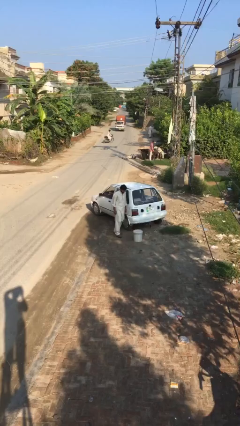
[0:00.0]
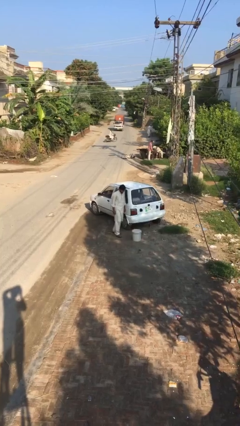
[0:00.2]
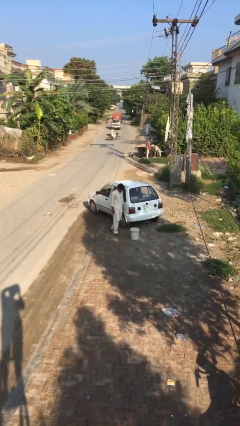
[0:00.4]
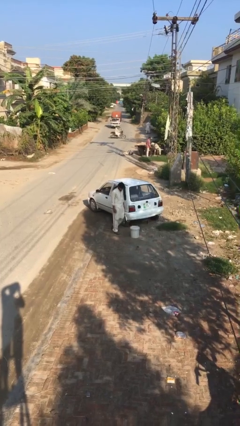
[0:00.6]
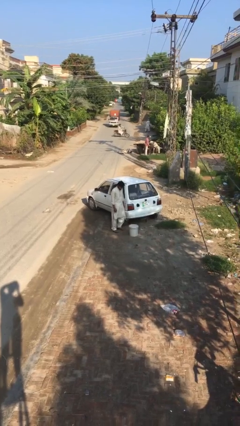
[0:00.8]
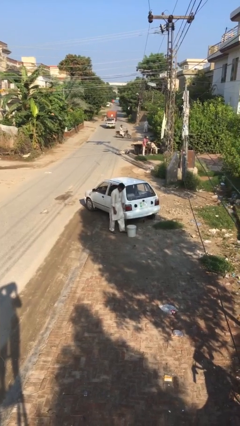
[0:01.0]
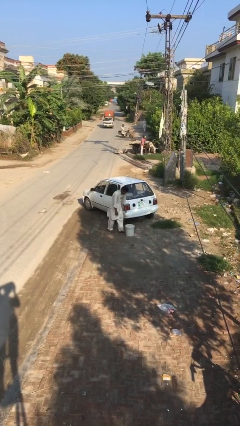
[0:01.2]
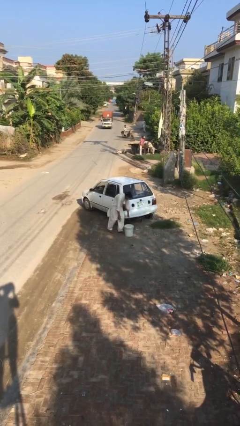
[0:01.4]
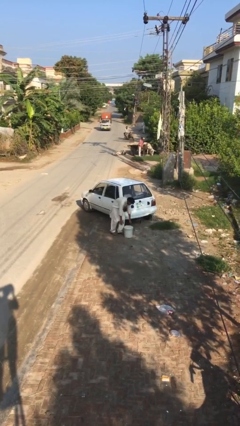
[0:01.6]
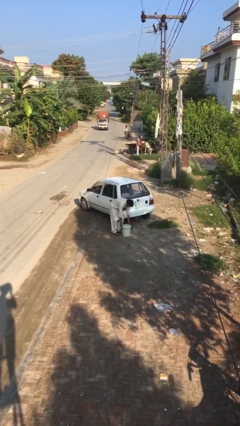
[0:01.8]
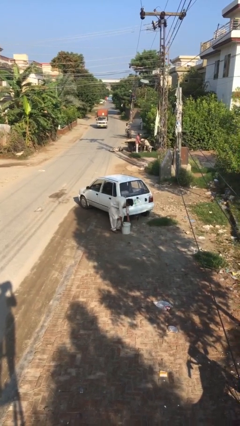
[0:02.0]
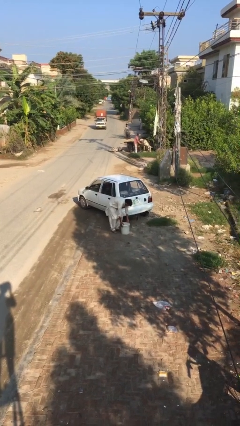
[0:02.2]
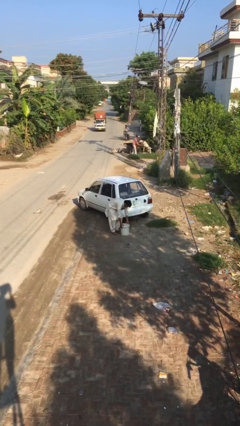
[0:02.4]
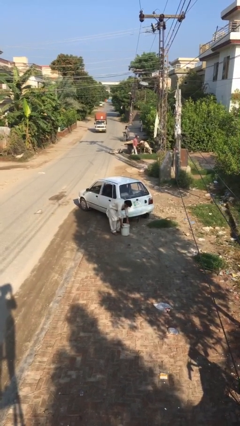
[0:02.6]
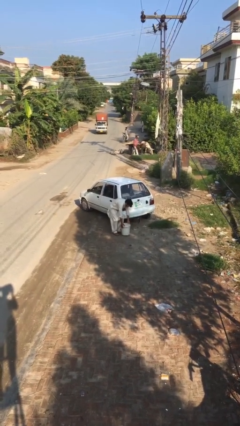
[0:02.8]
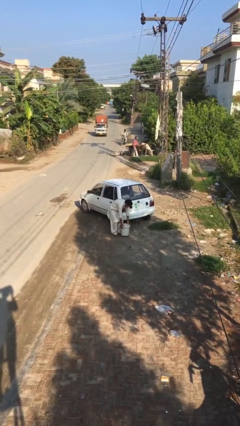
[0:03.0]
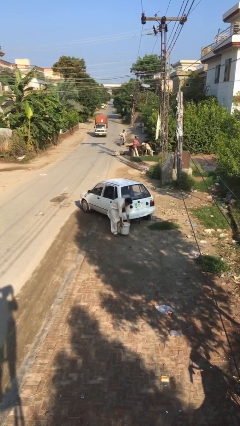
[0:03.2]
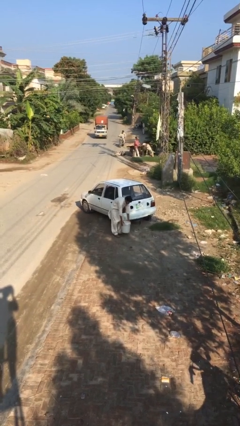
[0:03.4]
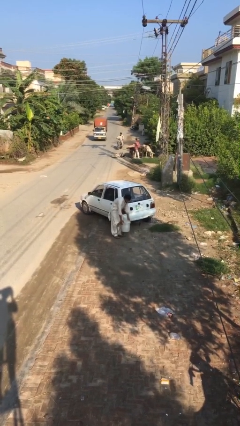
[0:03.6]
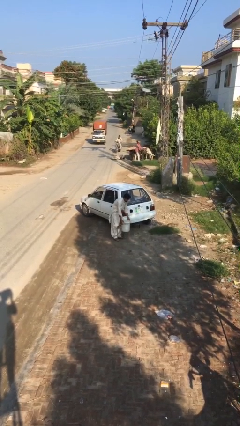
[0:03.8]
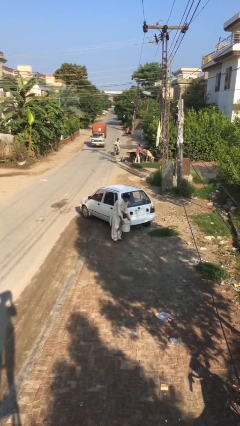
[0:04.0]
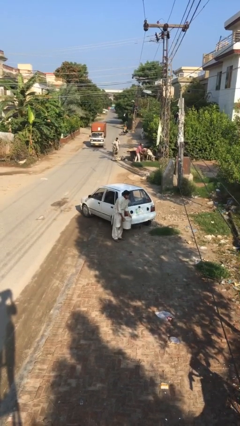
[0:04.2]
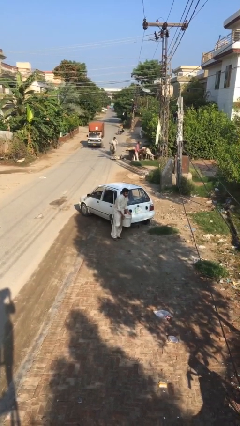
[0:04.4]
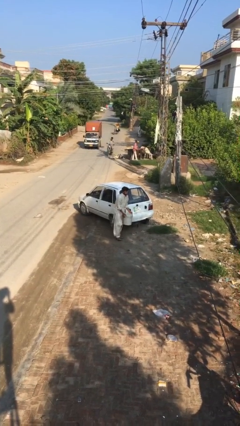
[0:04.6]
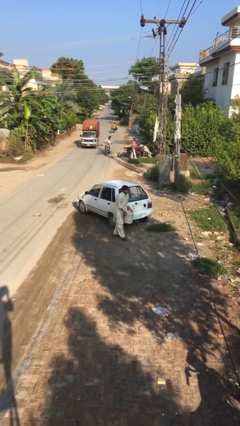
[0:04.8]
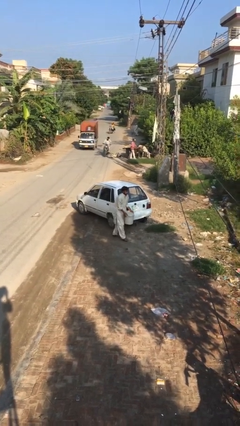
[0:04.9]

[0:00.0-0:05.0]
person picks up object from floor

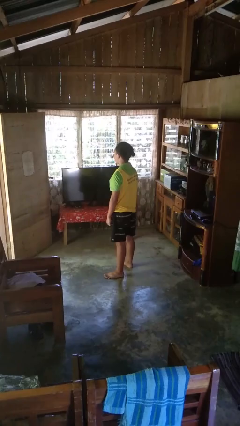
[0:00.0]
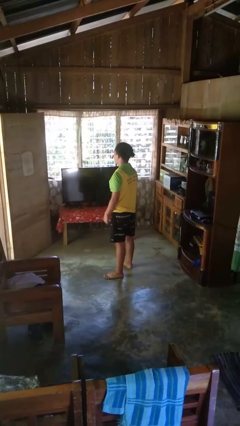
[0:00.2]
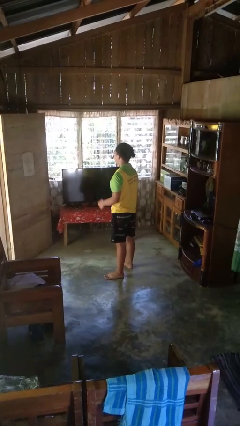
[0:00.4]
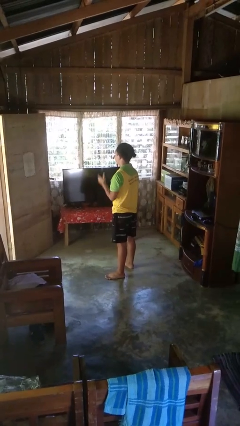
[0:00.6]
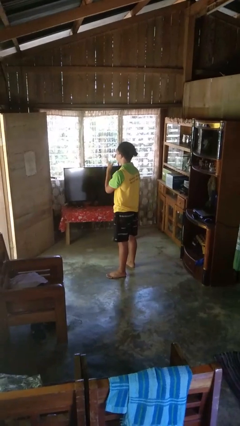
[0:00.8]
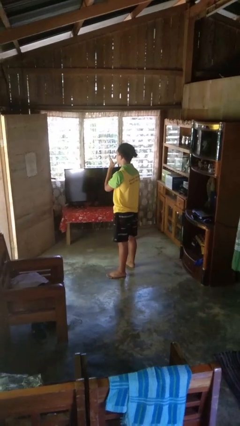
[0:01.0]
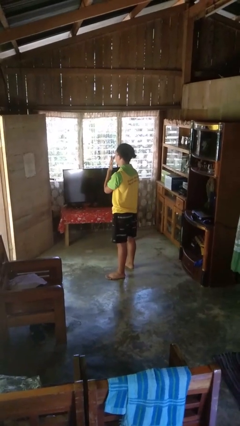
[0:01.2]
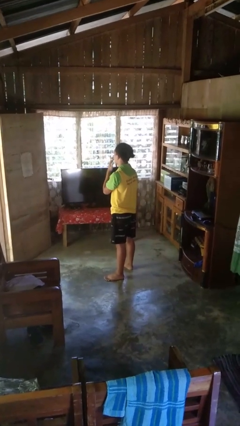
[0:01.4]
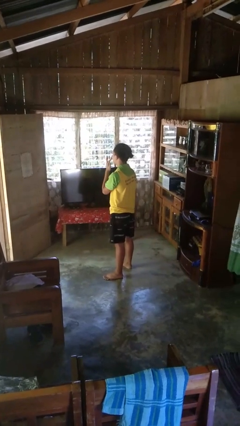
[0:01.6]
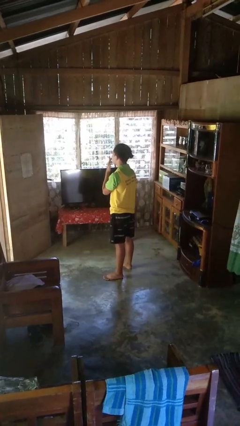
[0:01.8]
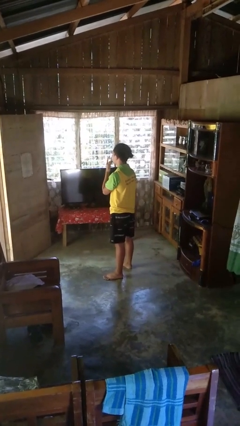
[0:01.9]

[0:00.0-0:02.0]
person licks fingers

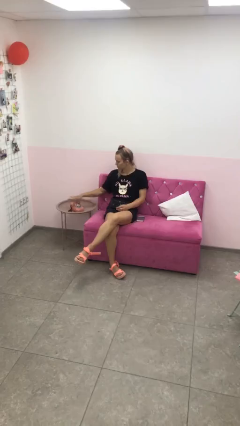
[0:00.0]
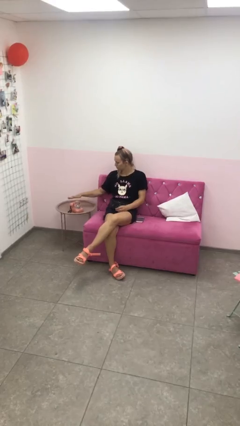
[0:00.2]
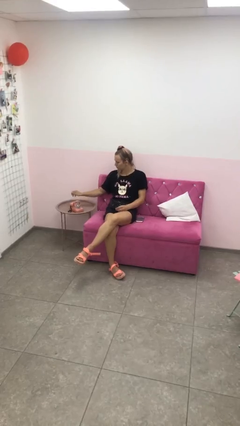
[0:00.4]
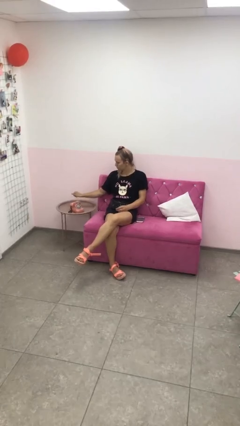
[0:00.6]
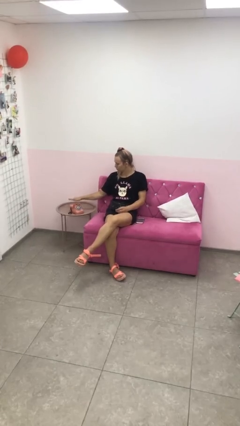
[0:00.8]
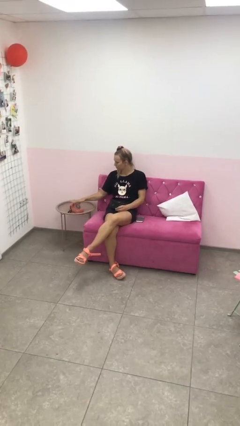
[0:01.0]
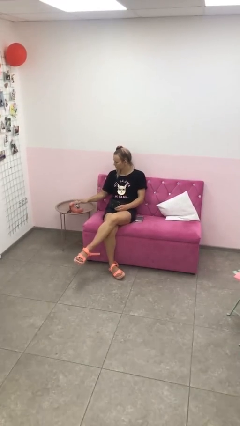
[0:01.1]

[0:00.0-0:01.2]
person waves hand over object

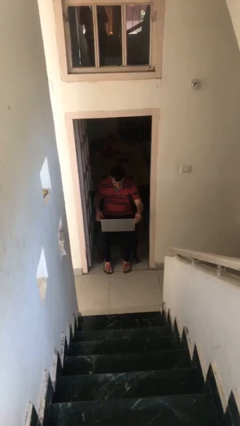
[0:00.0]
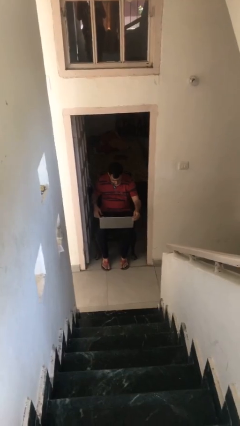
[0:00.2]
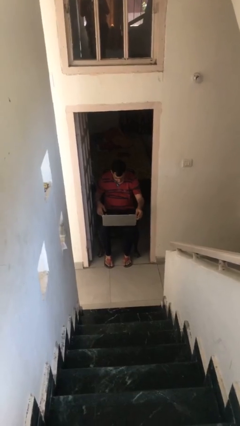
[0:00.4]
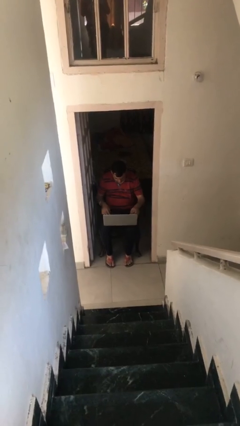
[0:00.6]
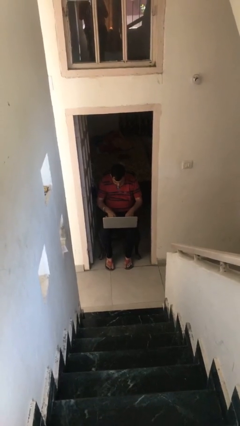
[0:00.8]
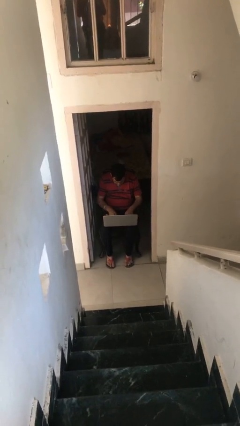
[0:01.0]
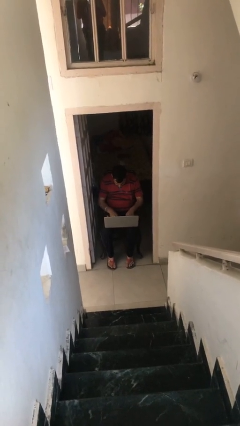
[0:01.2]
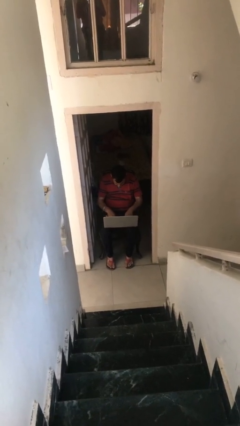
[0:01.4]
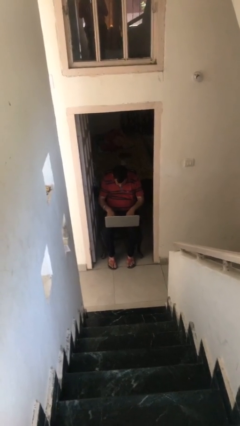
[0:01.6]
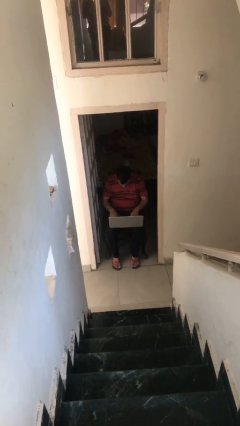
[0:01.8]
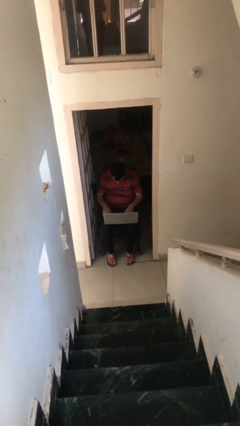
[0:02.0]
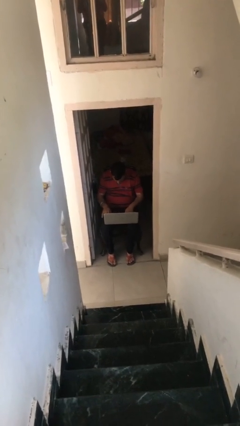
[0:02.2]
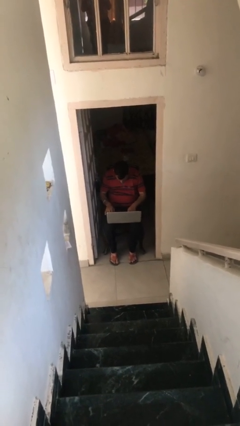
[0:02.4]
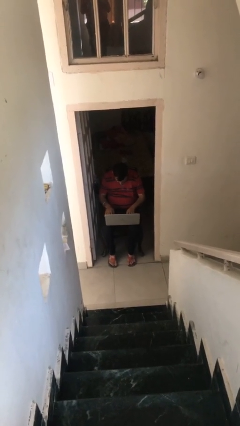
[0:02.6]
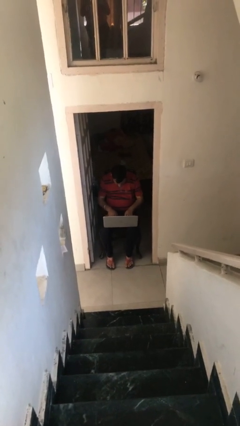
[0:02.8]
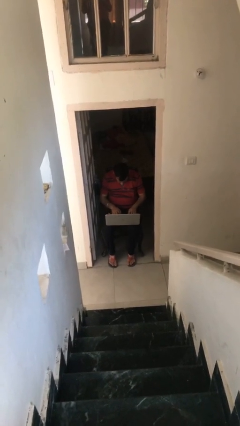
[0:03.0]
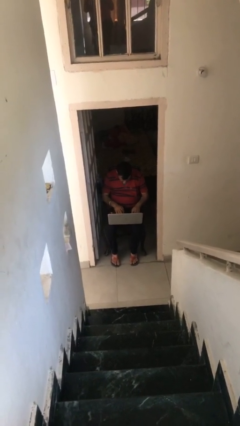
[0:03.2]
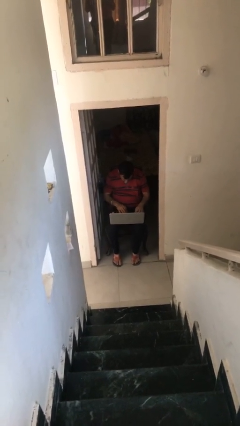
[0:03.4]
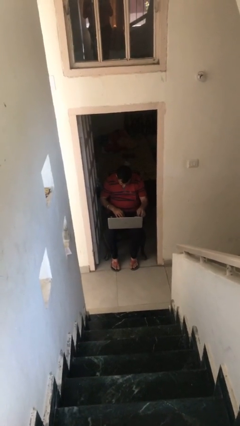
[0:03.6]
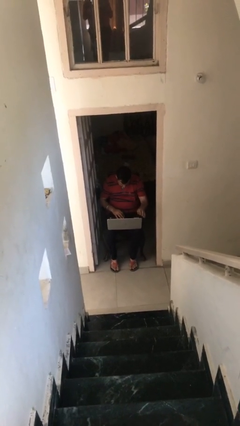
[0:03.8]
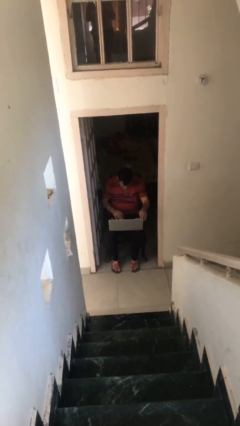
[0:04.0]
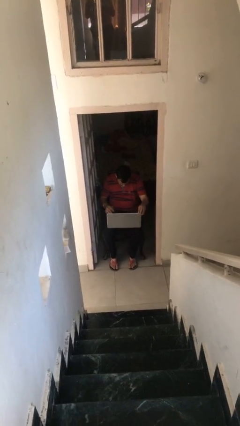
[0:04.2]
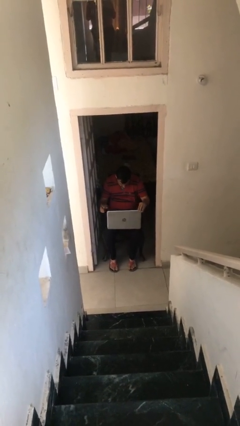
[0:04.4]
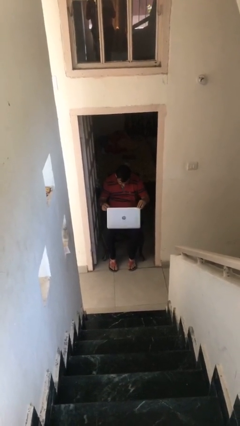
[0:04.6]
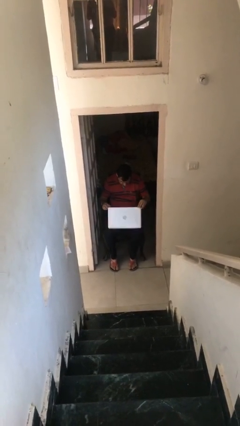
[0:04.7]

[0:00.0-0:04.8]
person interacts with laptop

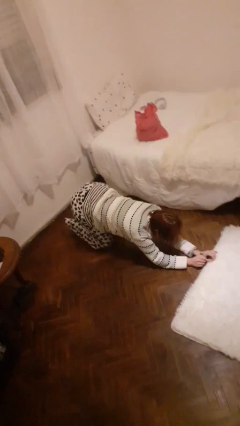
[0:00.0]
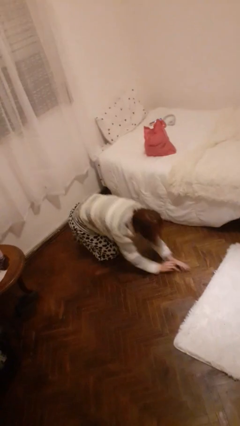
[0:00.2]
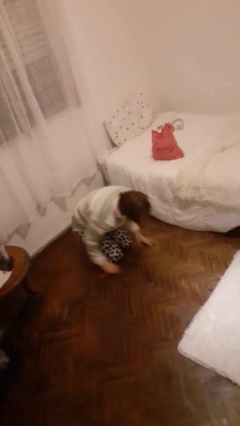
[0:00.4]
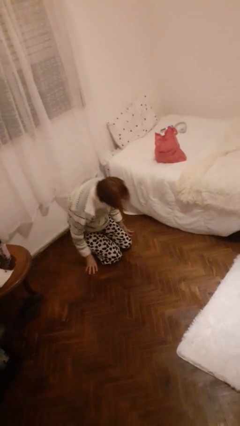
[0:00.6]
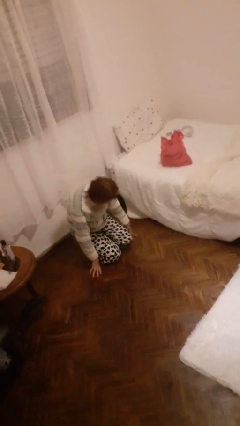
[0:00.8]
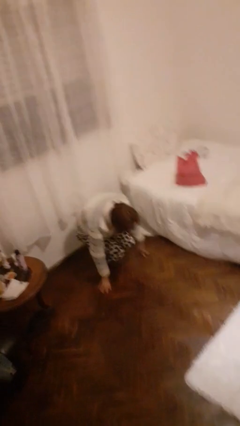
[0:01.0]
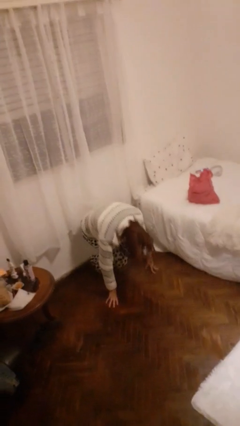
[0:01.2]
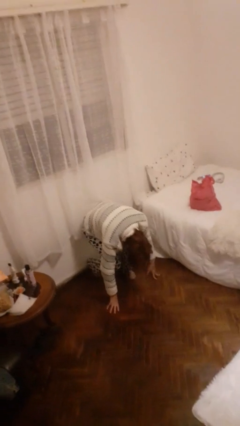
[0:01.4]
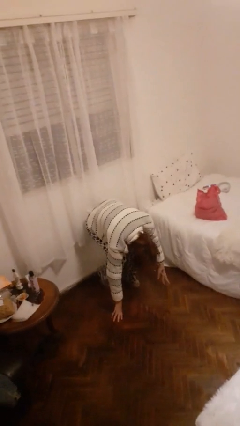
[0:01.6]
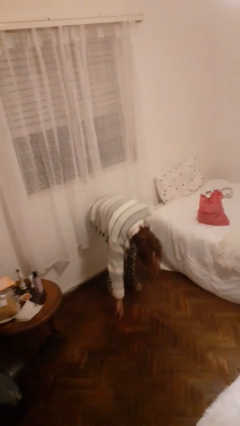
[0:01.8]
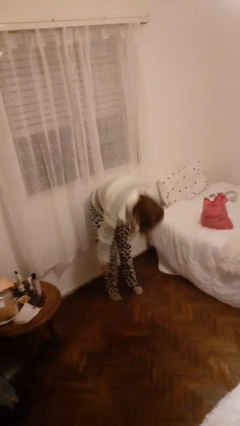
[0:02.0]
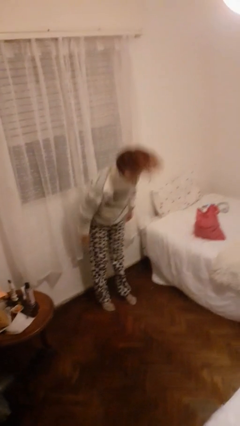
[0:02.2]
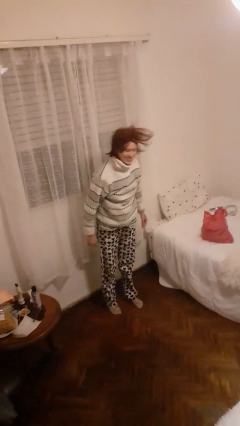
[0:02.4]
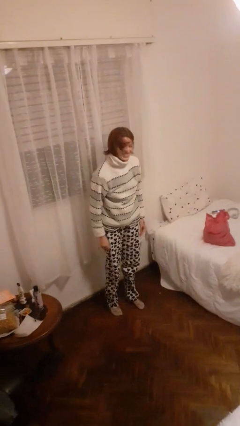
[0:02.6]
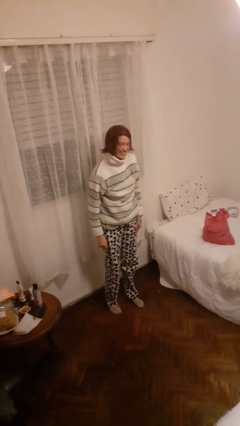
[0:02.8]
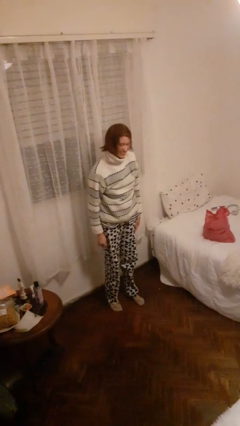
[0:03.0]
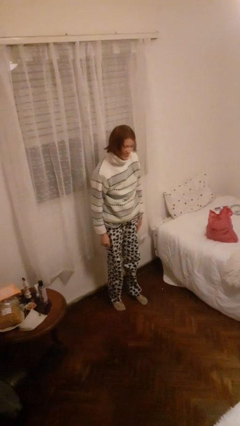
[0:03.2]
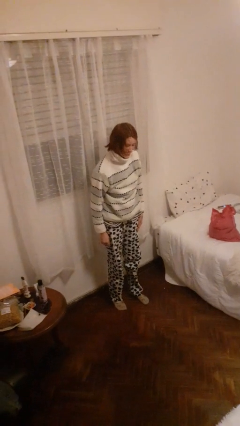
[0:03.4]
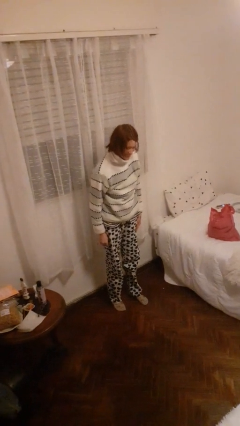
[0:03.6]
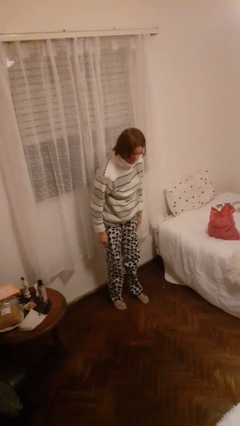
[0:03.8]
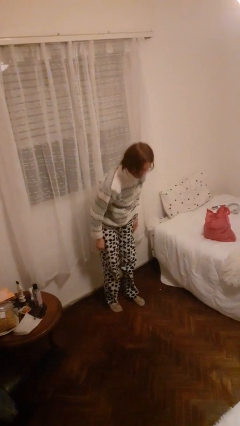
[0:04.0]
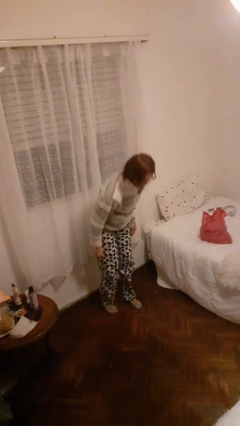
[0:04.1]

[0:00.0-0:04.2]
person stands up from floor
